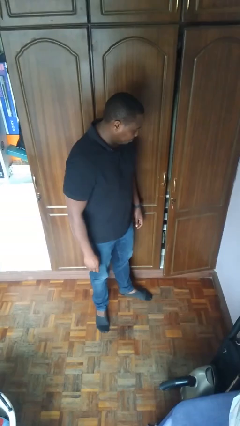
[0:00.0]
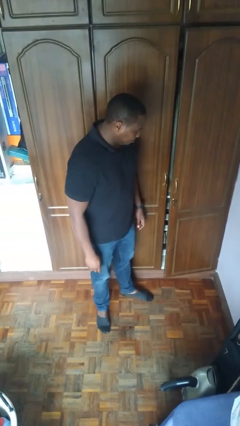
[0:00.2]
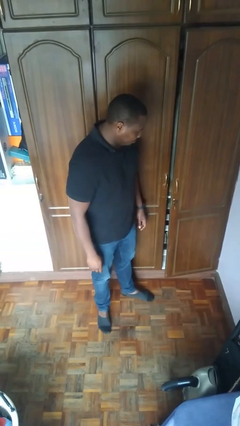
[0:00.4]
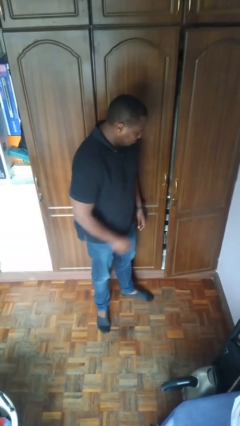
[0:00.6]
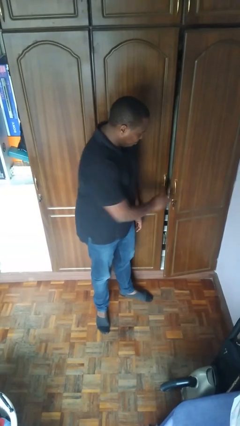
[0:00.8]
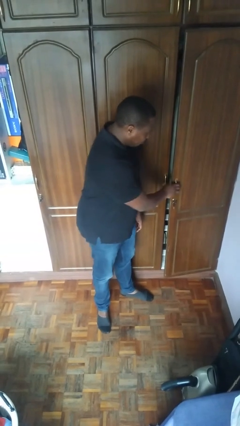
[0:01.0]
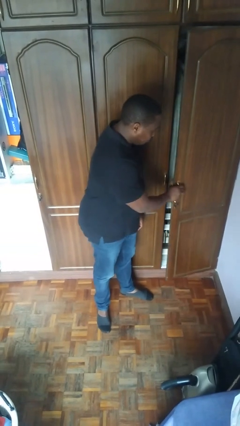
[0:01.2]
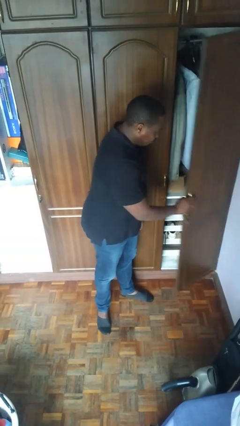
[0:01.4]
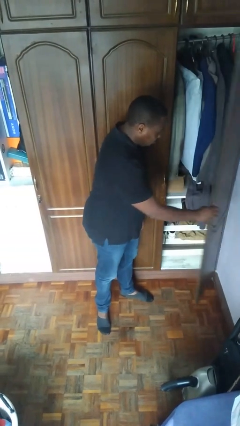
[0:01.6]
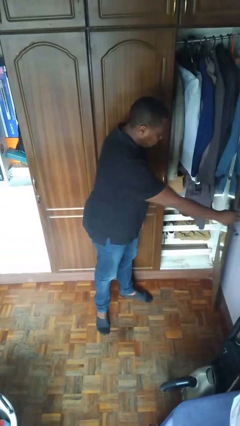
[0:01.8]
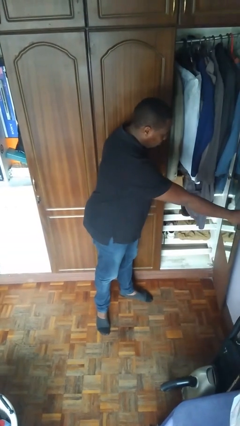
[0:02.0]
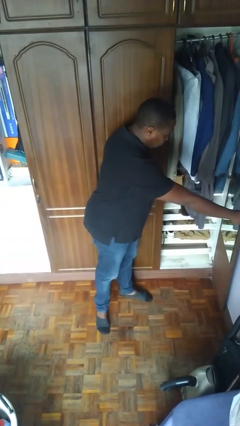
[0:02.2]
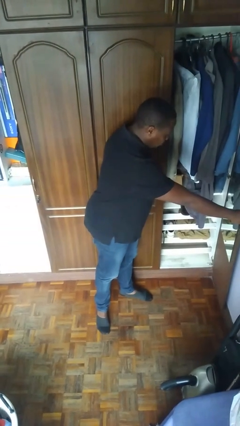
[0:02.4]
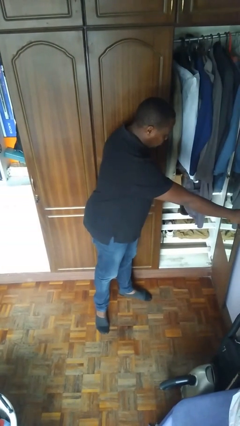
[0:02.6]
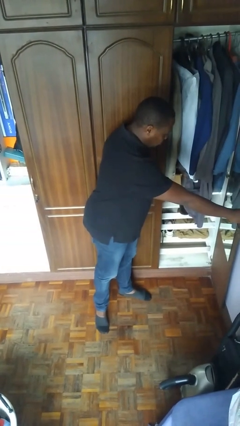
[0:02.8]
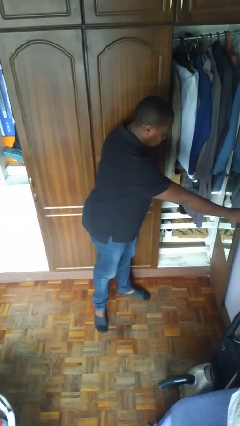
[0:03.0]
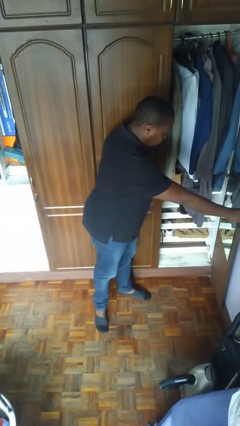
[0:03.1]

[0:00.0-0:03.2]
person opens closet door

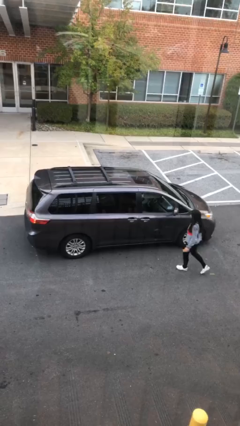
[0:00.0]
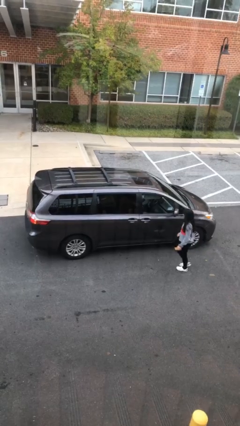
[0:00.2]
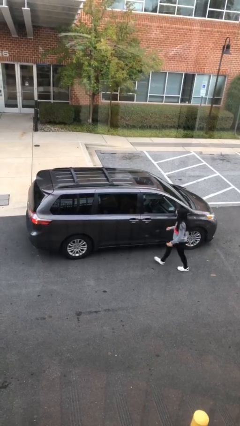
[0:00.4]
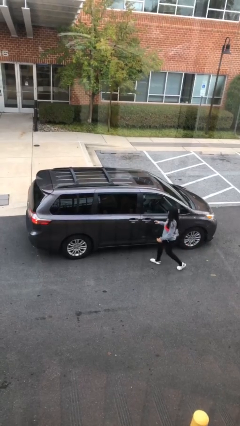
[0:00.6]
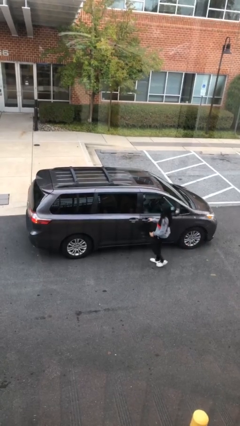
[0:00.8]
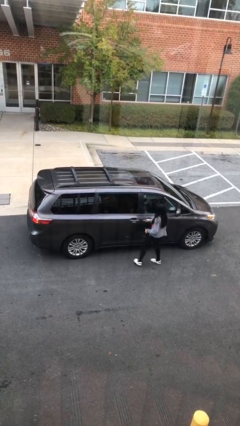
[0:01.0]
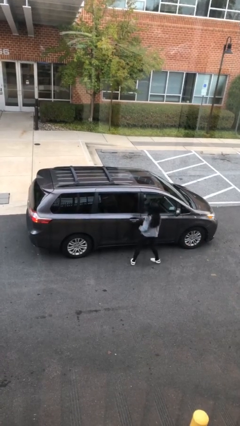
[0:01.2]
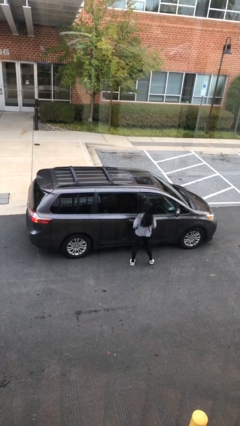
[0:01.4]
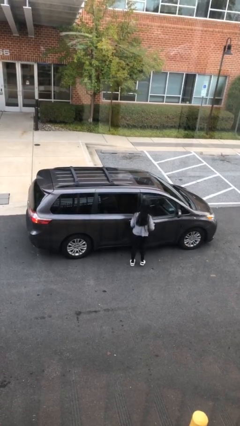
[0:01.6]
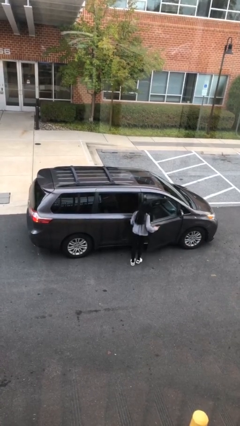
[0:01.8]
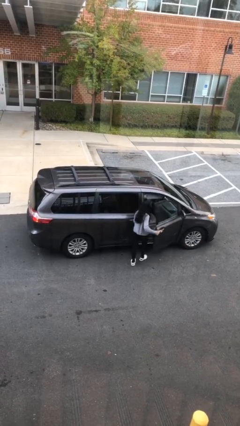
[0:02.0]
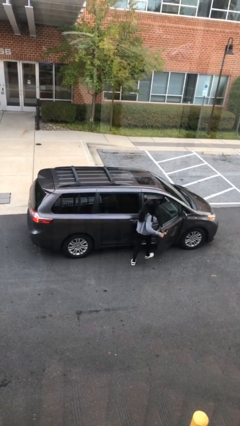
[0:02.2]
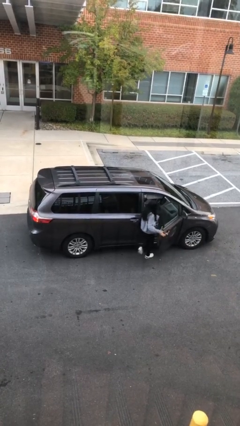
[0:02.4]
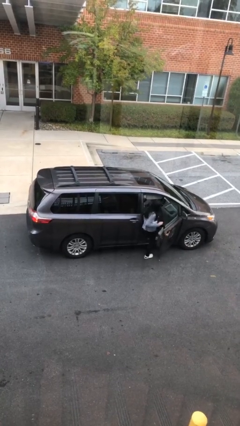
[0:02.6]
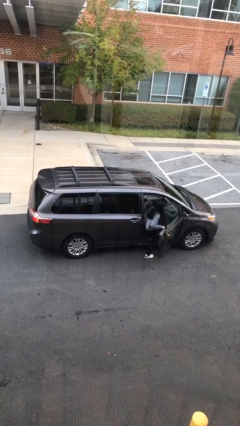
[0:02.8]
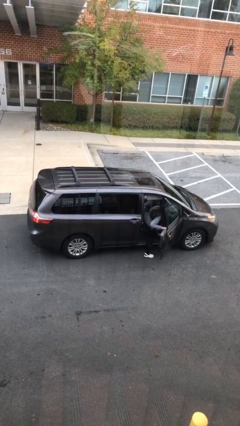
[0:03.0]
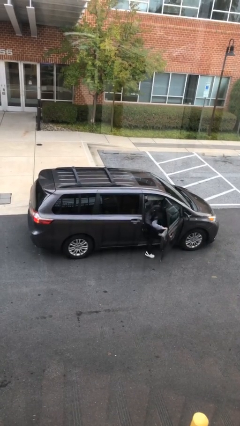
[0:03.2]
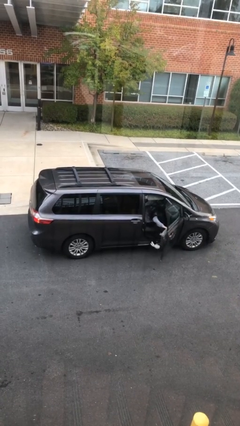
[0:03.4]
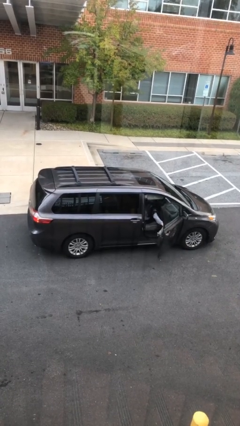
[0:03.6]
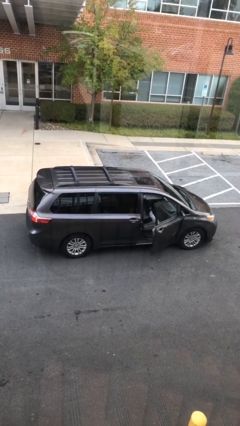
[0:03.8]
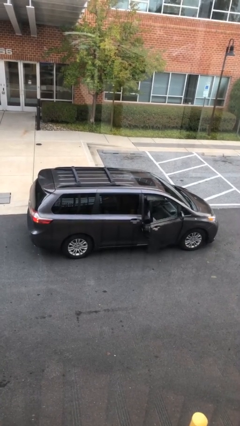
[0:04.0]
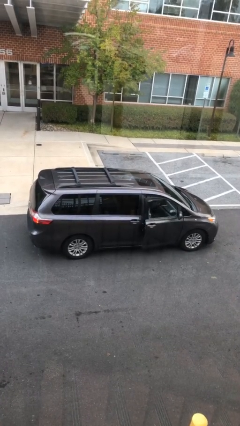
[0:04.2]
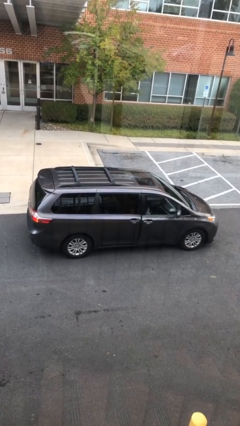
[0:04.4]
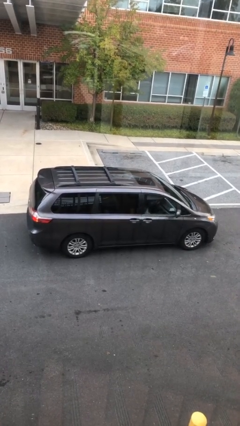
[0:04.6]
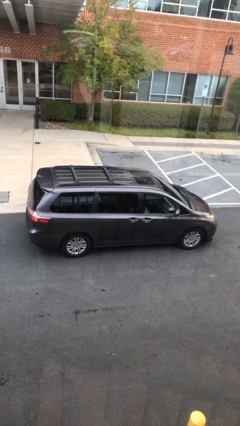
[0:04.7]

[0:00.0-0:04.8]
car picks up person

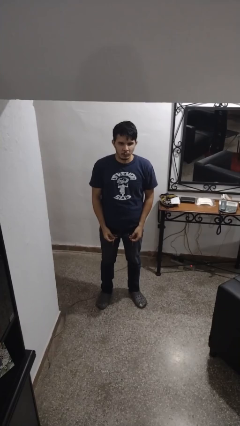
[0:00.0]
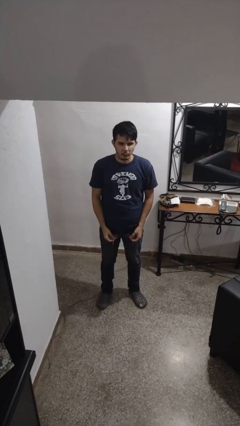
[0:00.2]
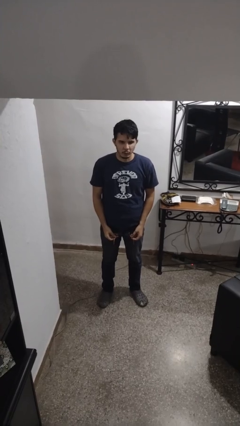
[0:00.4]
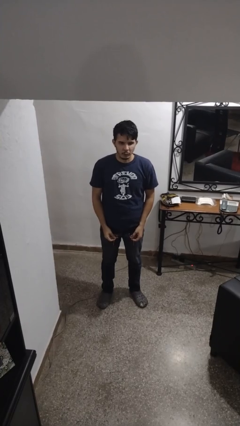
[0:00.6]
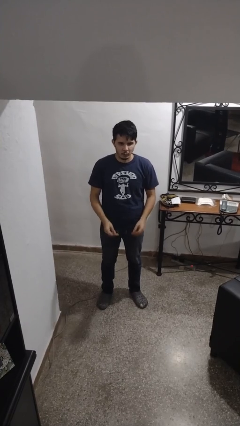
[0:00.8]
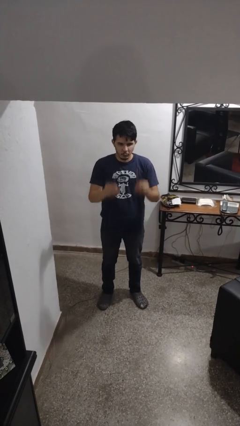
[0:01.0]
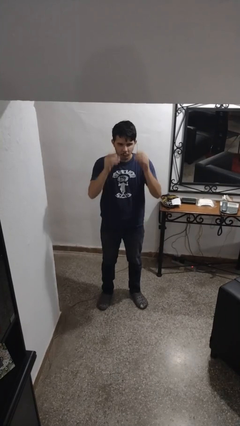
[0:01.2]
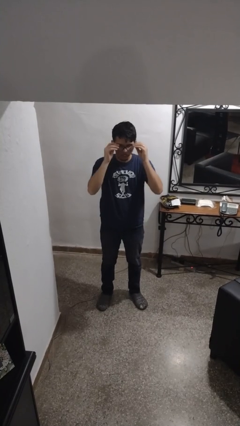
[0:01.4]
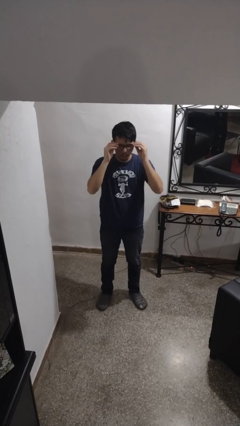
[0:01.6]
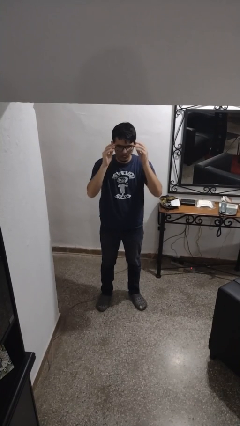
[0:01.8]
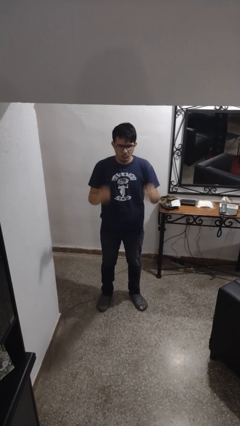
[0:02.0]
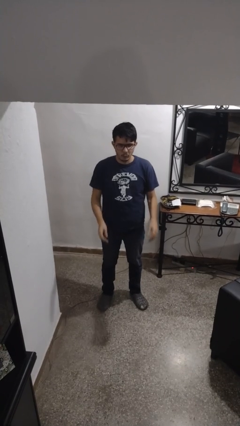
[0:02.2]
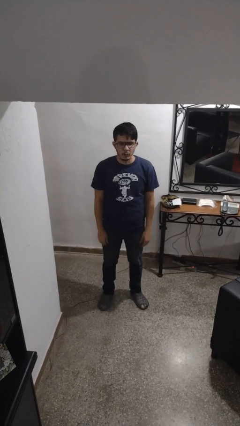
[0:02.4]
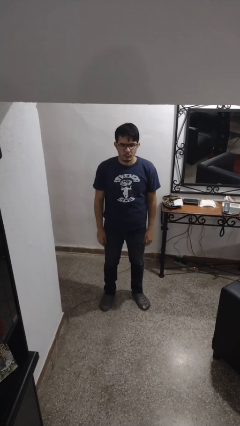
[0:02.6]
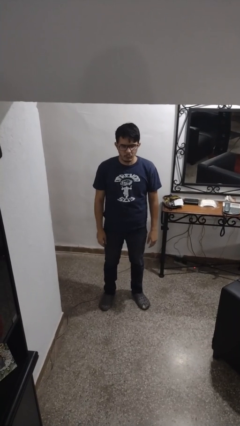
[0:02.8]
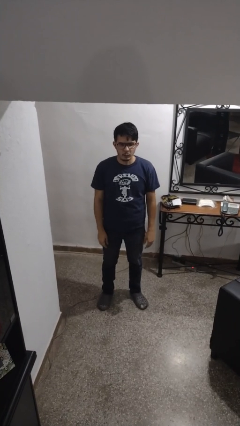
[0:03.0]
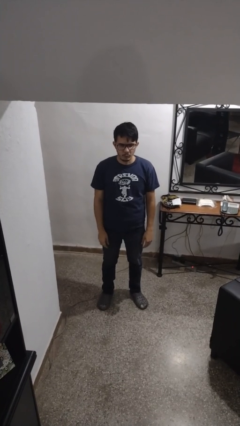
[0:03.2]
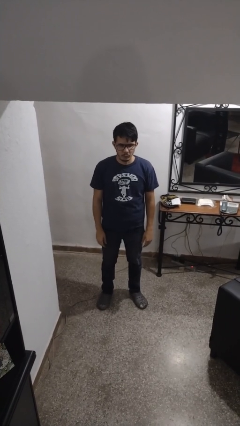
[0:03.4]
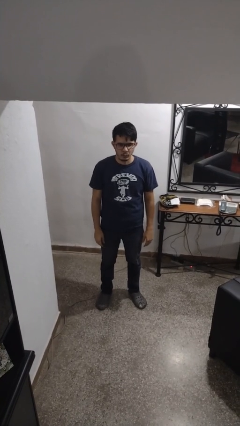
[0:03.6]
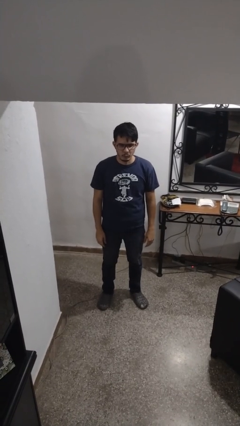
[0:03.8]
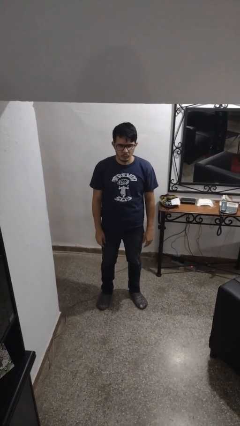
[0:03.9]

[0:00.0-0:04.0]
person puts on glasses

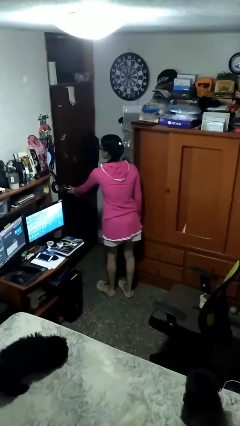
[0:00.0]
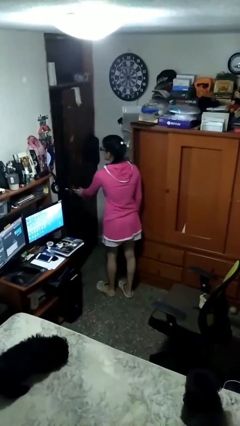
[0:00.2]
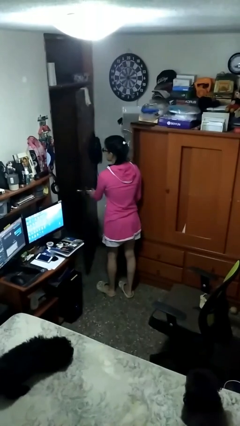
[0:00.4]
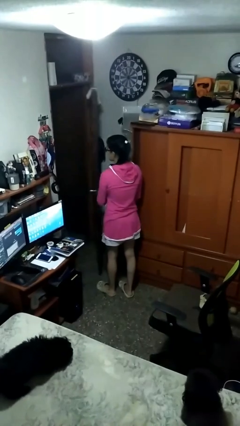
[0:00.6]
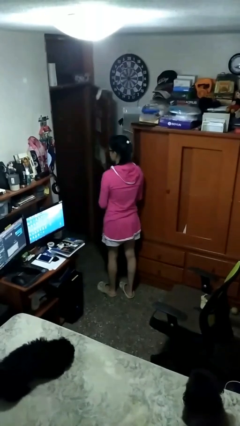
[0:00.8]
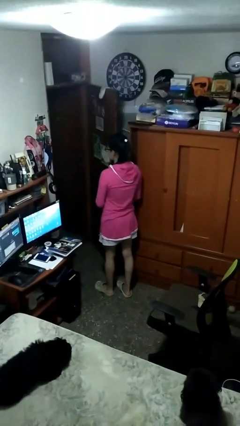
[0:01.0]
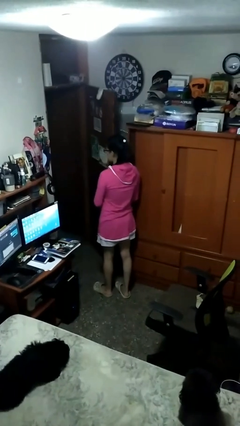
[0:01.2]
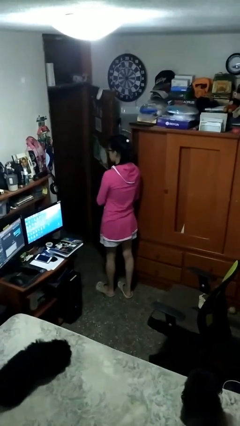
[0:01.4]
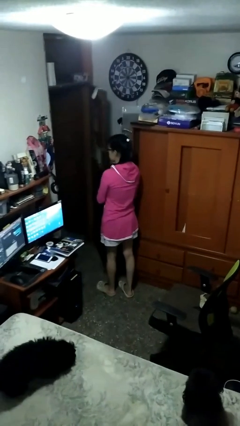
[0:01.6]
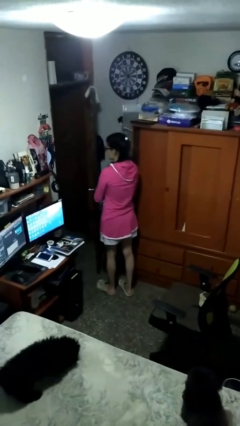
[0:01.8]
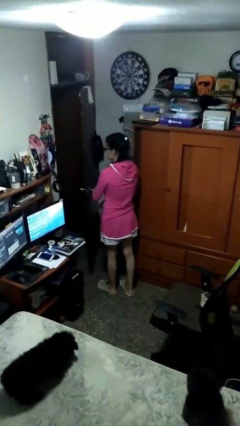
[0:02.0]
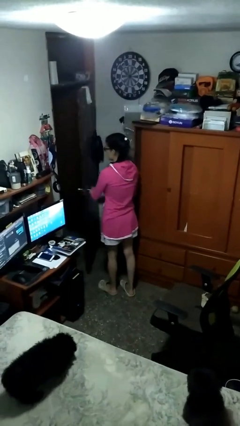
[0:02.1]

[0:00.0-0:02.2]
person opens facility door

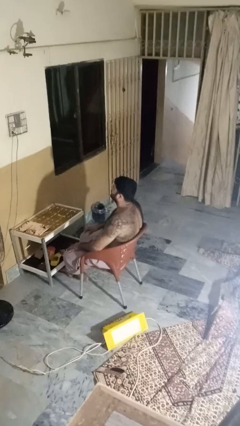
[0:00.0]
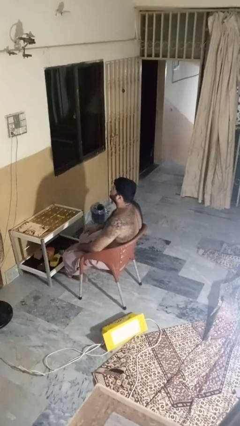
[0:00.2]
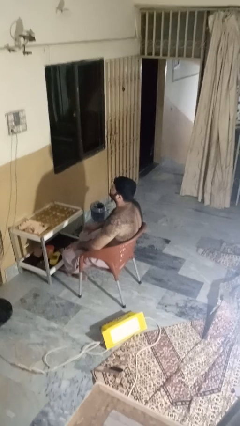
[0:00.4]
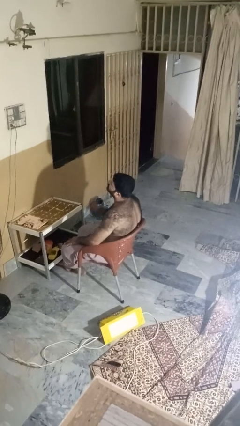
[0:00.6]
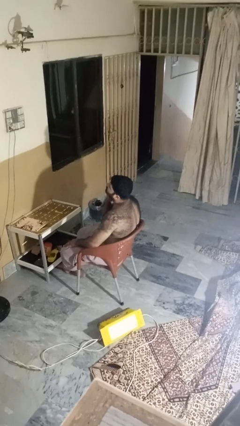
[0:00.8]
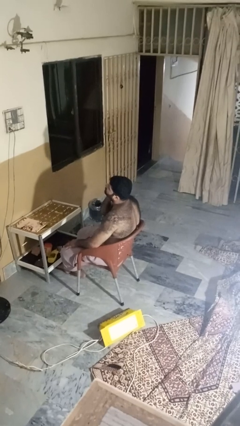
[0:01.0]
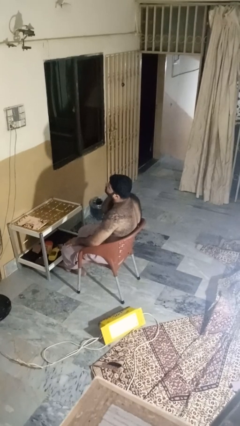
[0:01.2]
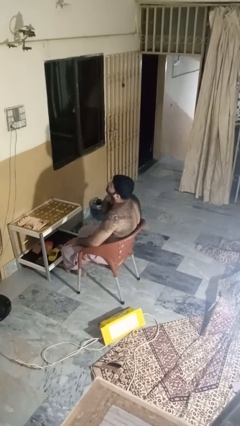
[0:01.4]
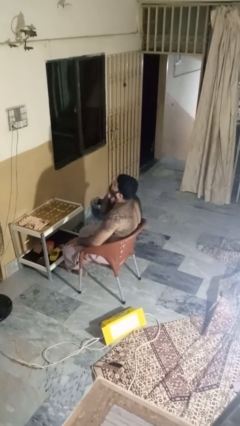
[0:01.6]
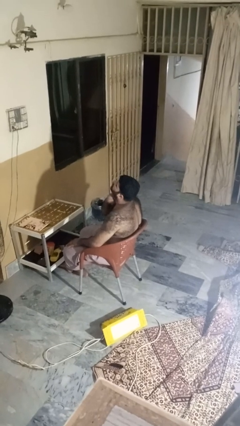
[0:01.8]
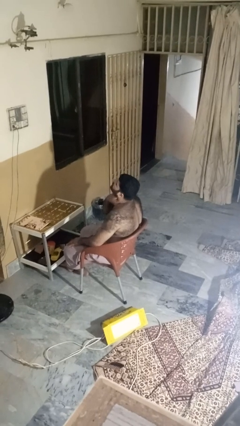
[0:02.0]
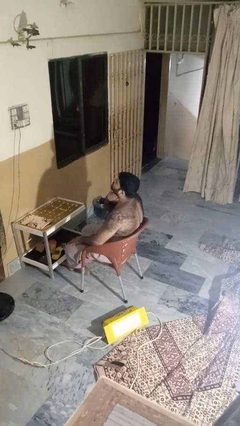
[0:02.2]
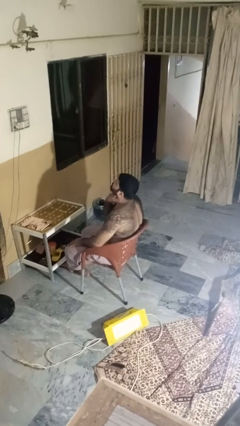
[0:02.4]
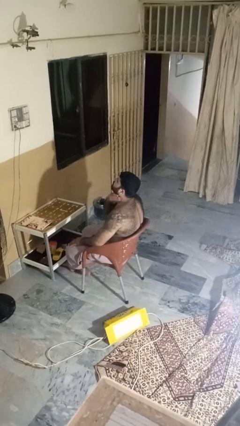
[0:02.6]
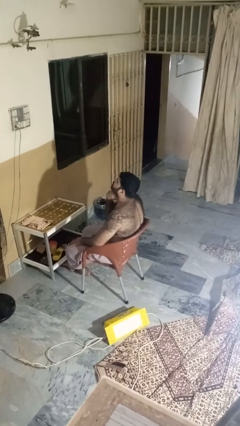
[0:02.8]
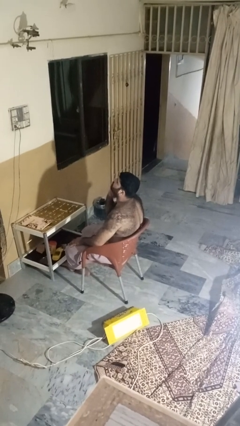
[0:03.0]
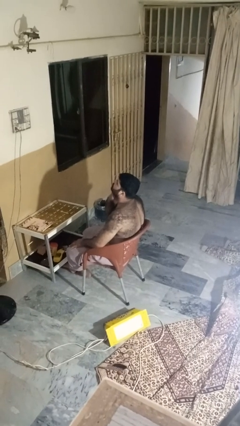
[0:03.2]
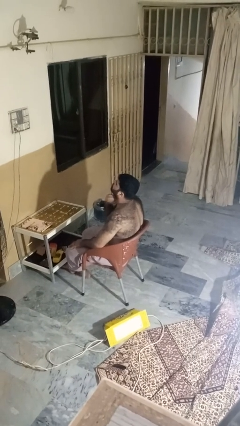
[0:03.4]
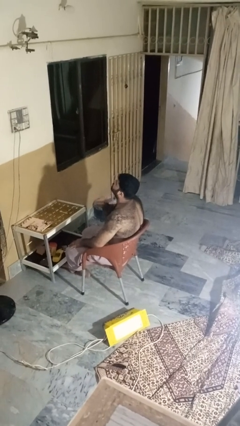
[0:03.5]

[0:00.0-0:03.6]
person rubs neck
